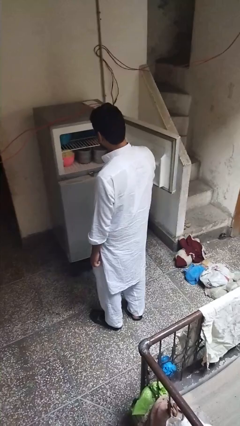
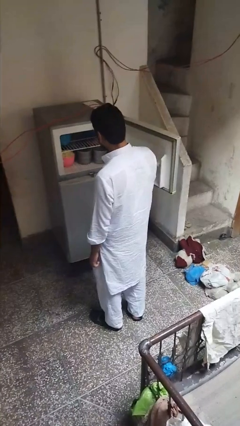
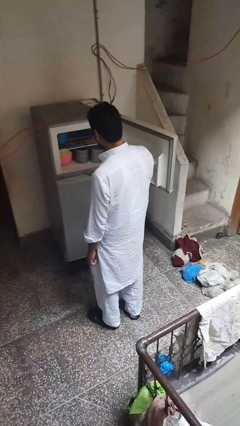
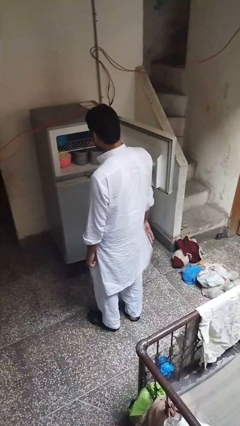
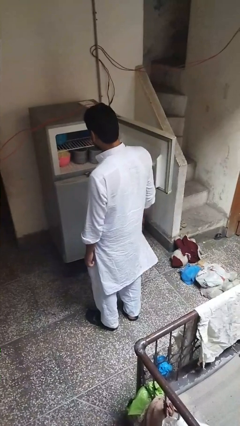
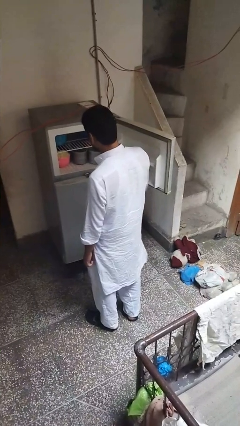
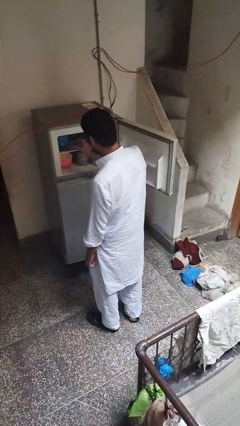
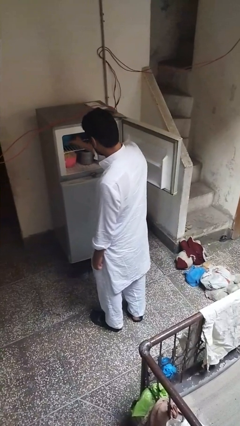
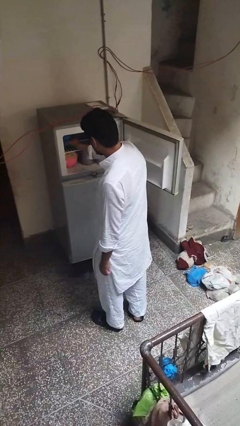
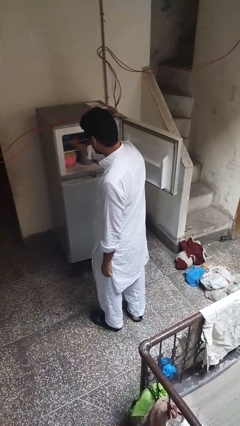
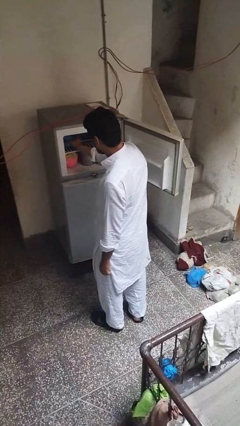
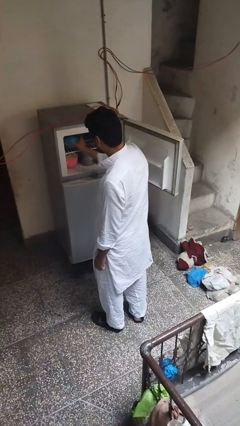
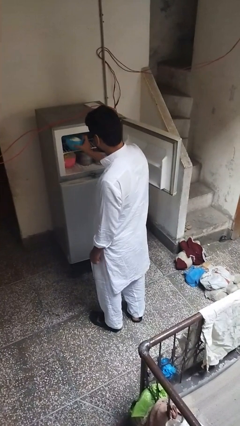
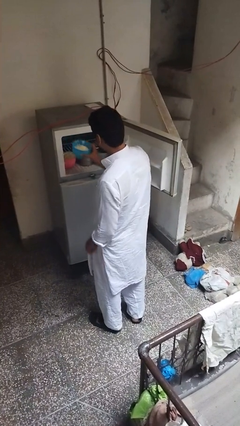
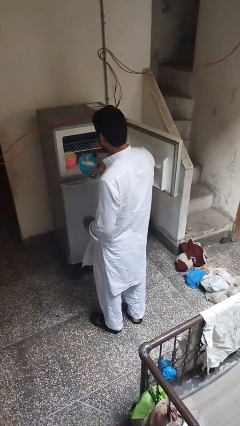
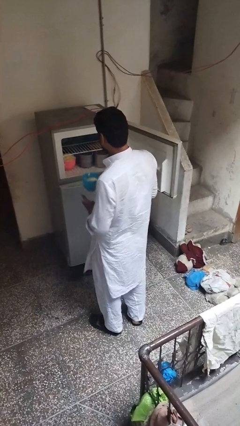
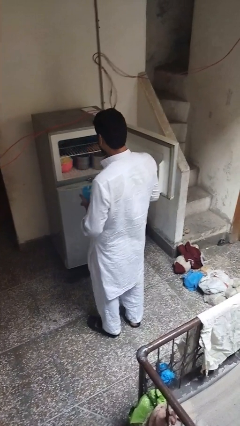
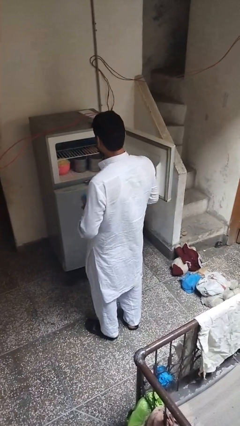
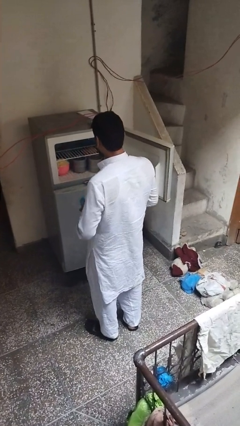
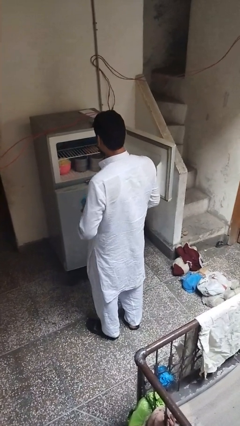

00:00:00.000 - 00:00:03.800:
person takes object from refrigerator

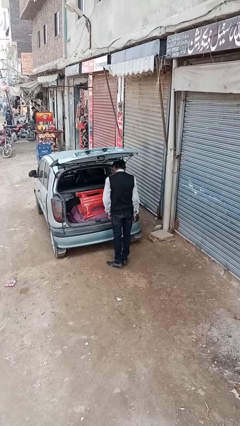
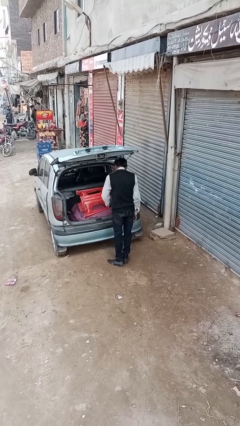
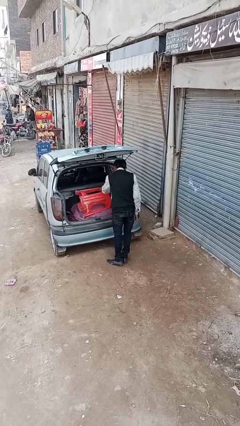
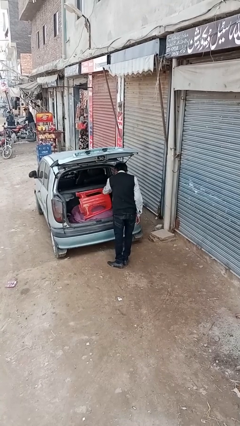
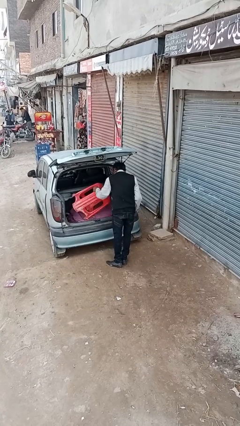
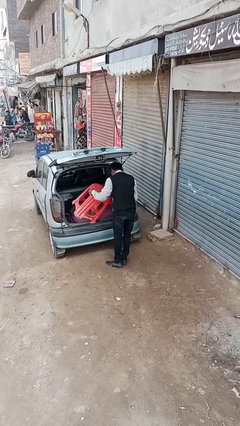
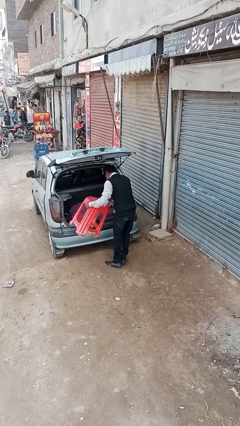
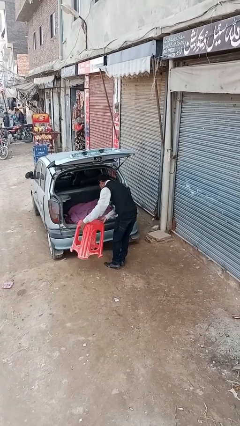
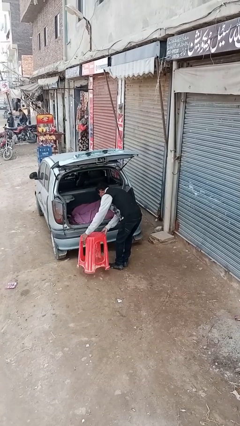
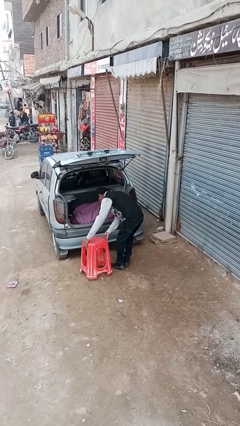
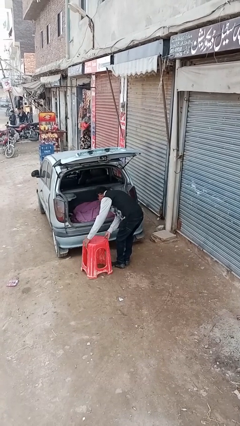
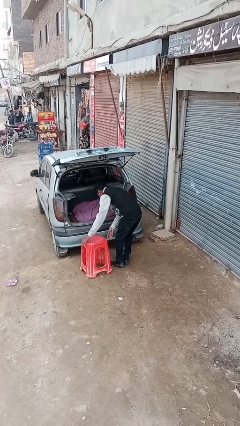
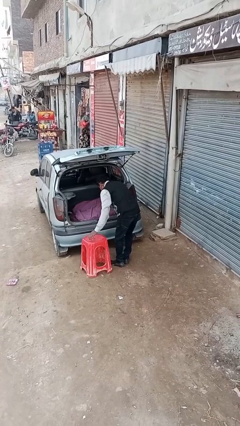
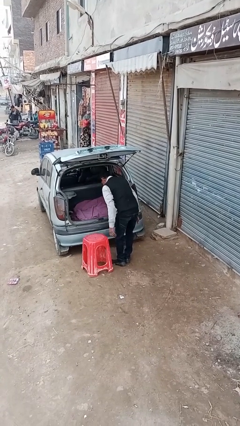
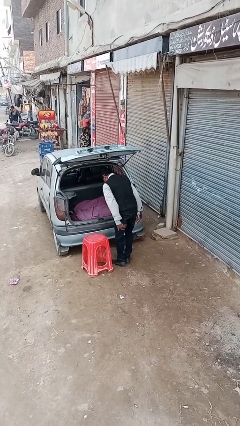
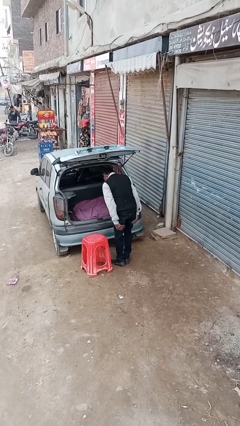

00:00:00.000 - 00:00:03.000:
person unloads car

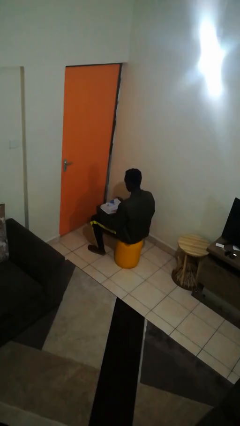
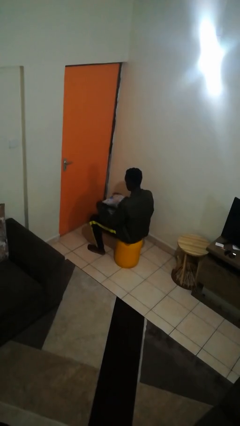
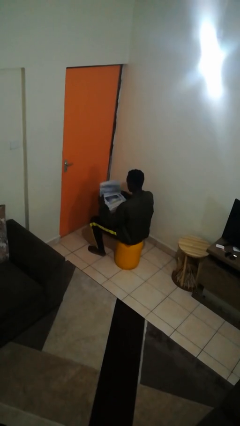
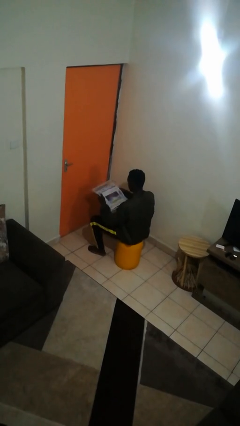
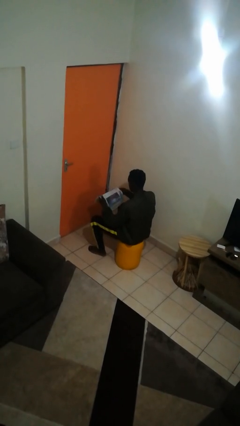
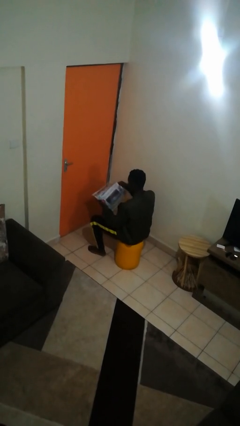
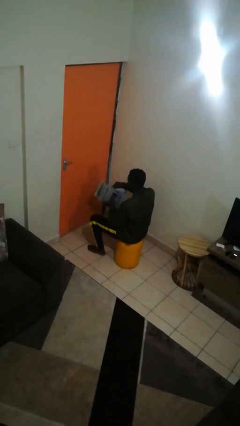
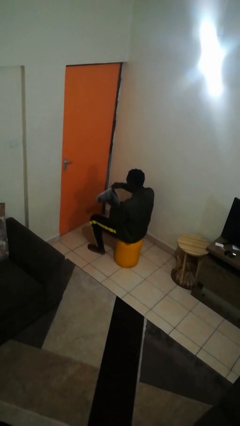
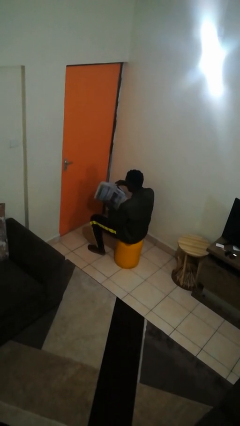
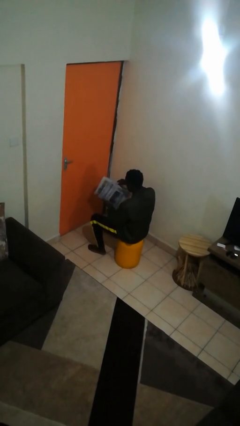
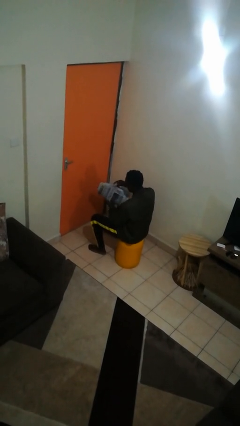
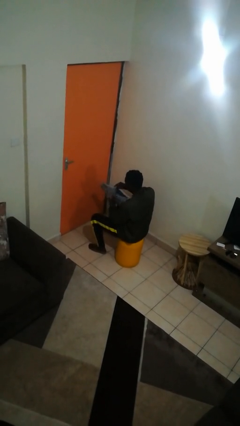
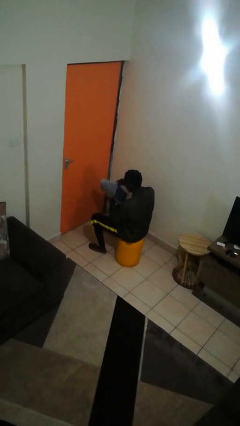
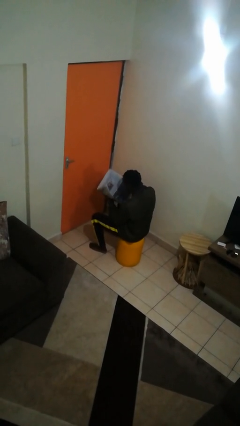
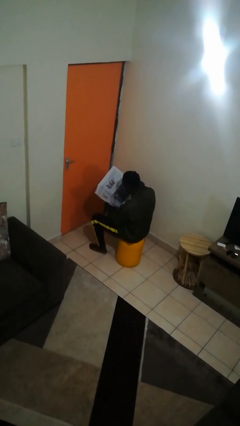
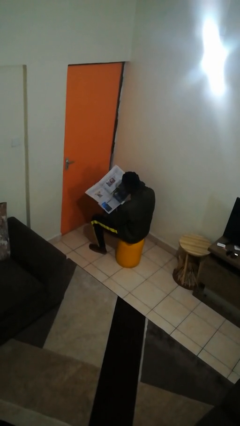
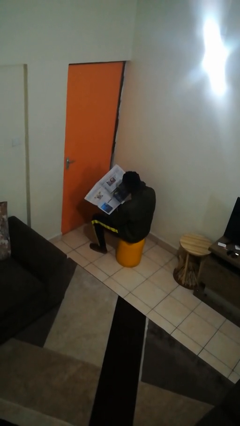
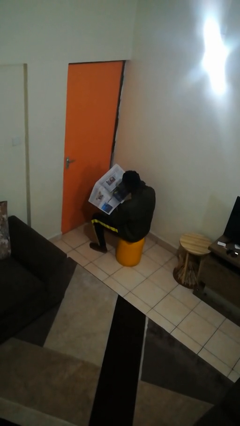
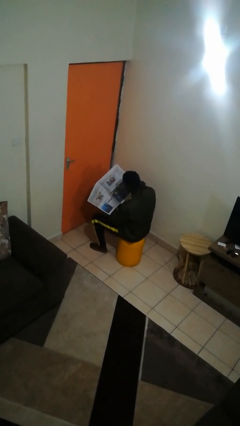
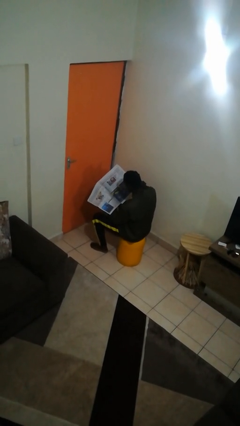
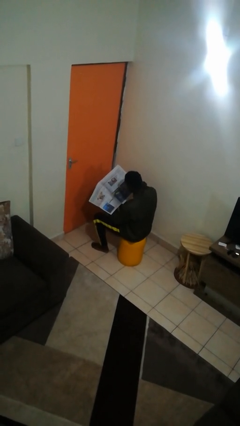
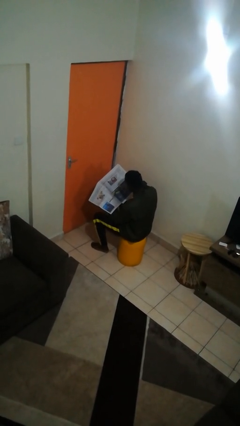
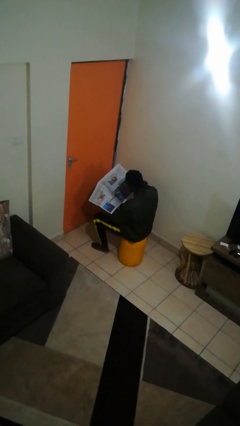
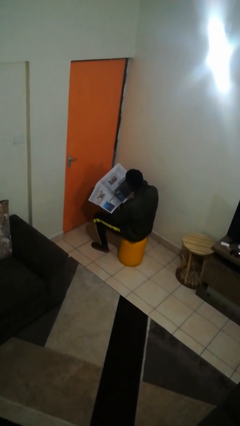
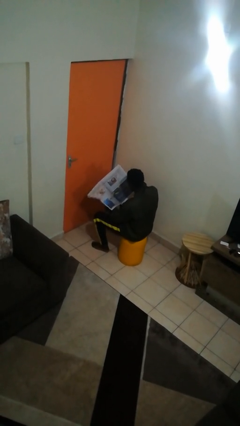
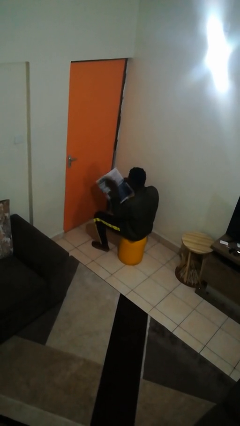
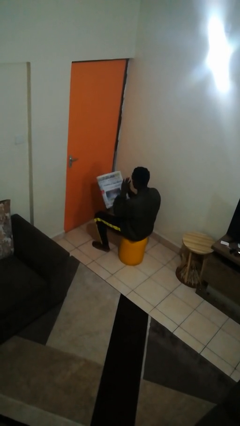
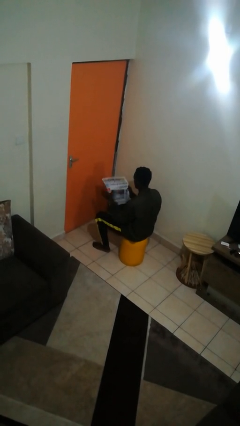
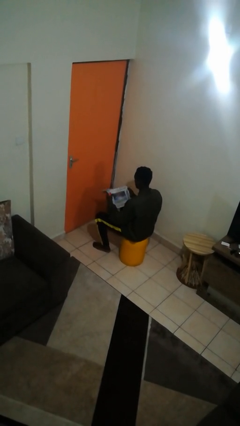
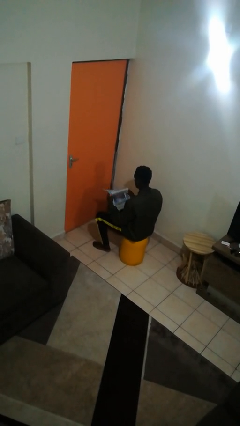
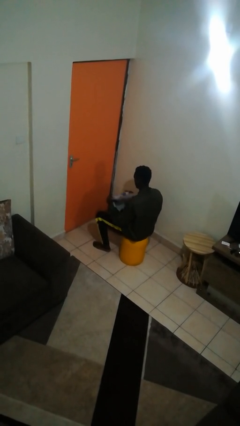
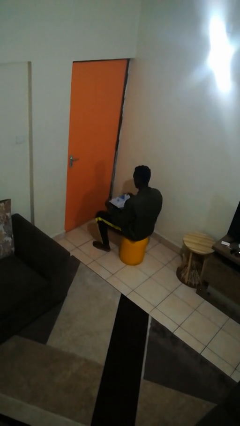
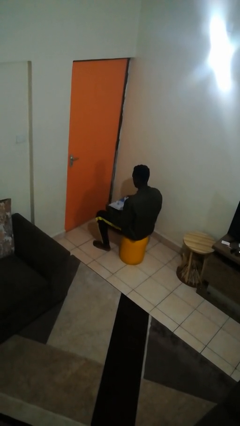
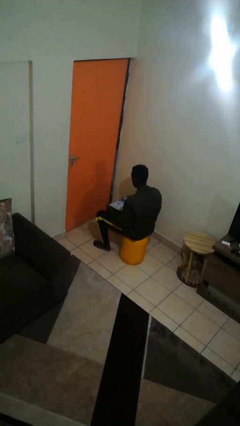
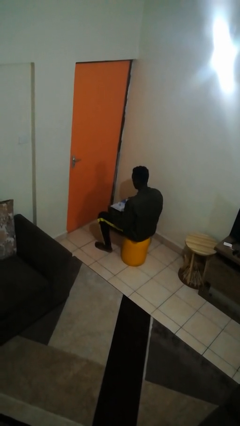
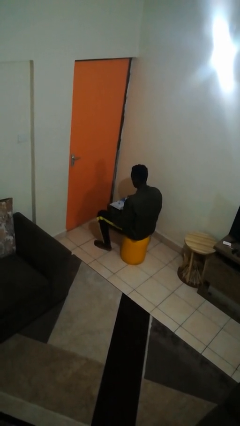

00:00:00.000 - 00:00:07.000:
person reads newspaper

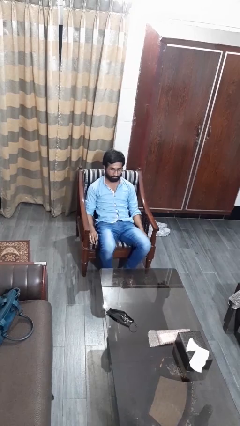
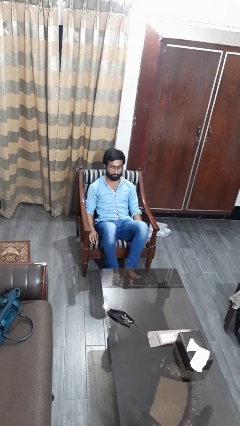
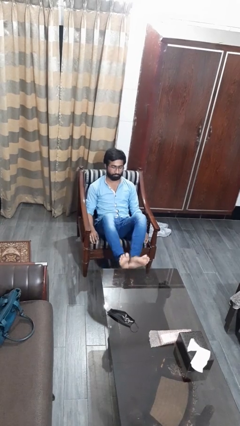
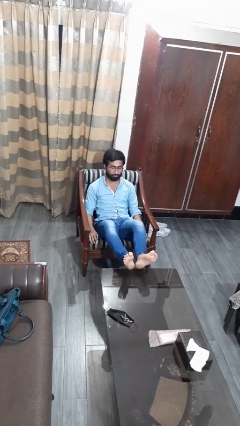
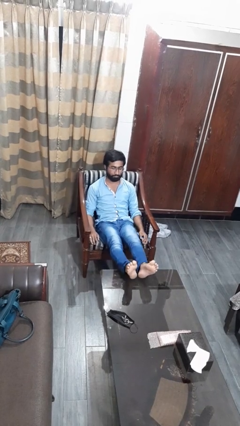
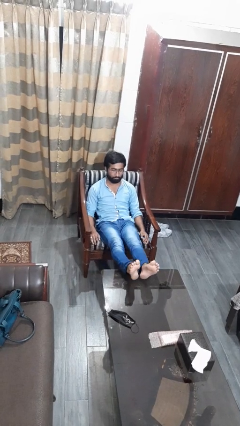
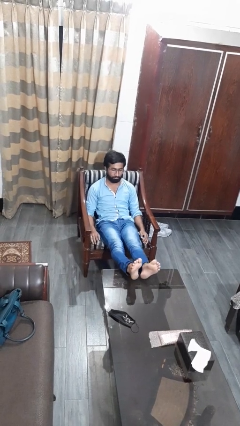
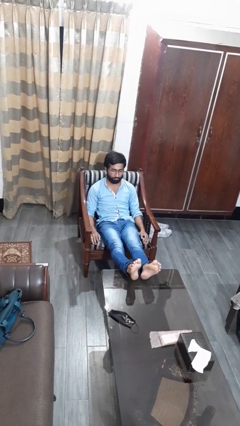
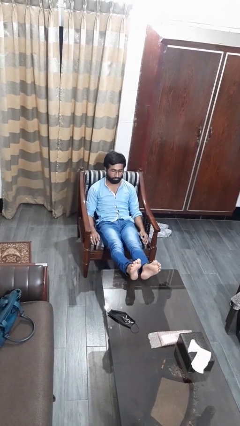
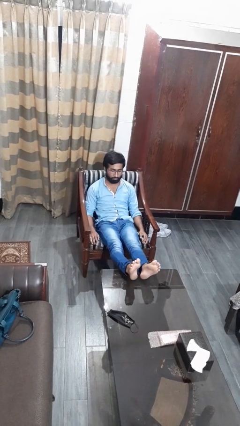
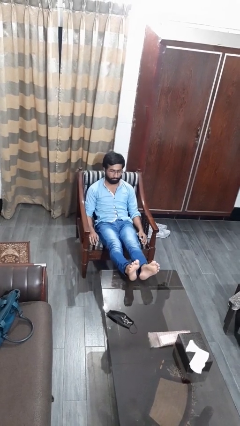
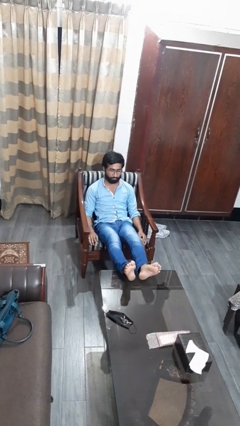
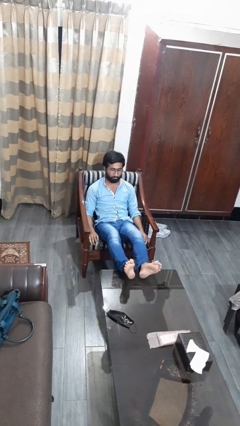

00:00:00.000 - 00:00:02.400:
person puts feet up

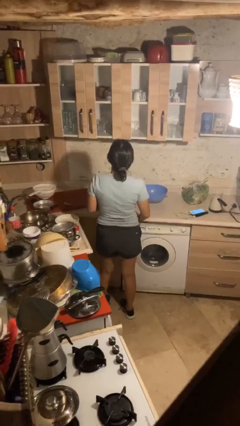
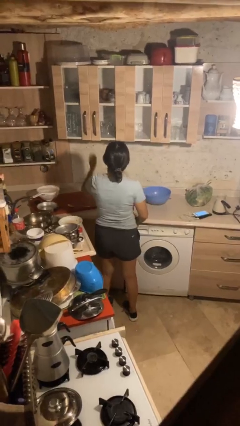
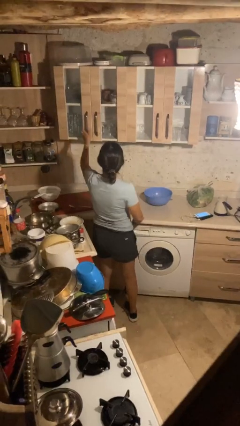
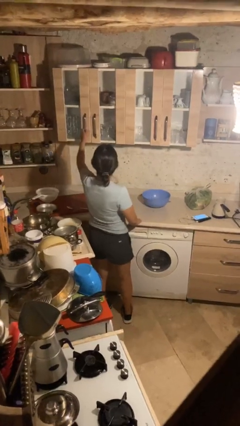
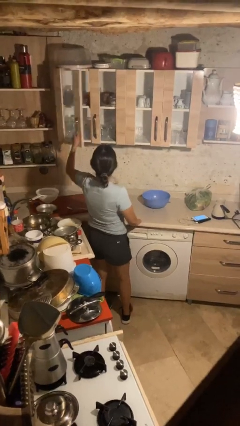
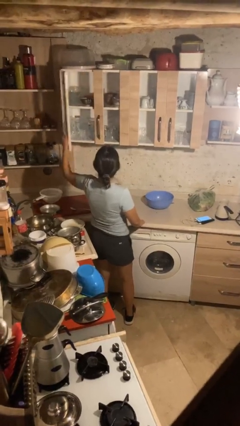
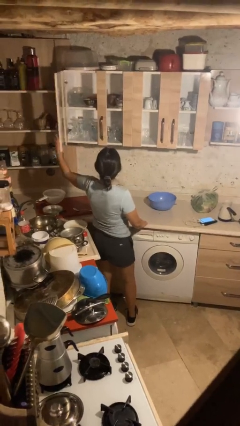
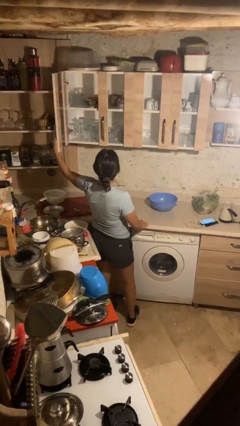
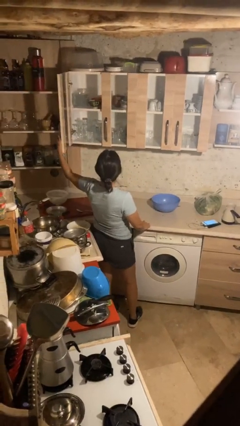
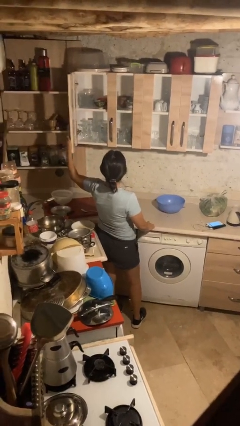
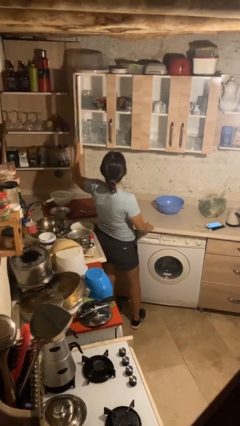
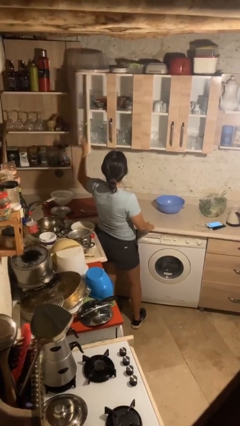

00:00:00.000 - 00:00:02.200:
person closes cabinet
